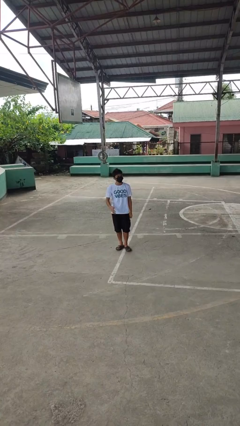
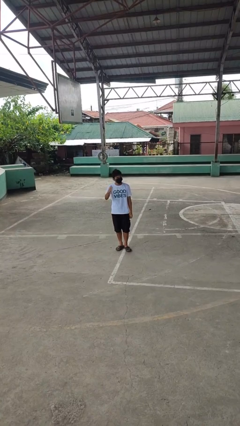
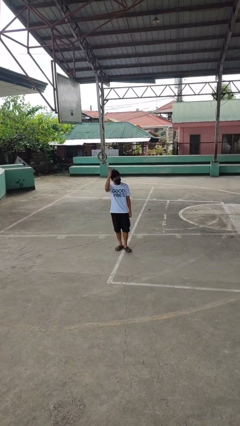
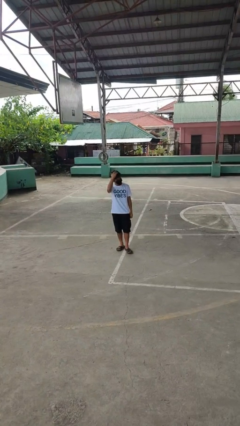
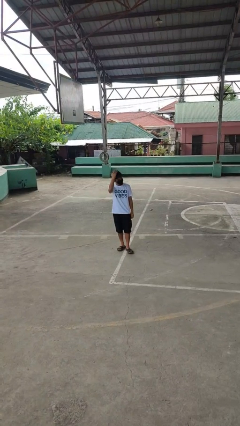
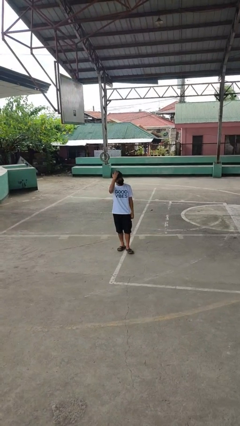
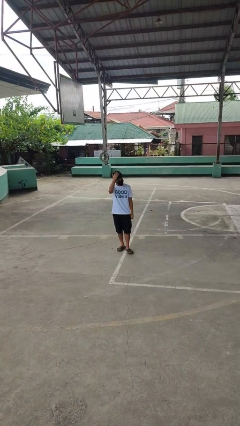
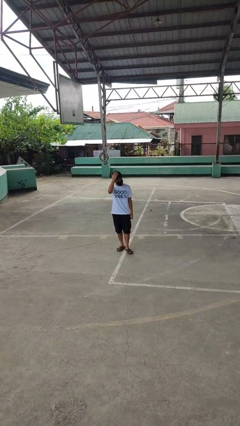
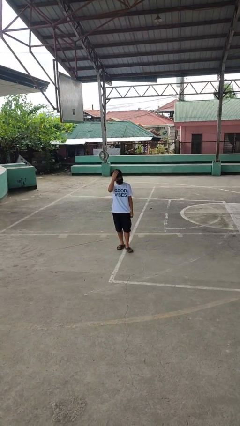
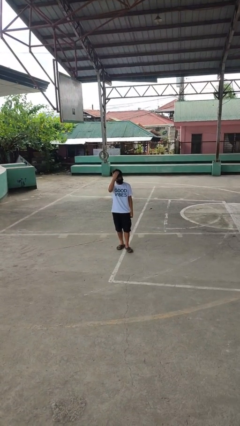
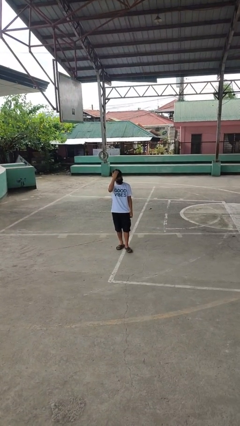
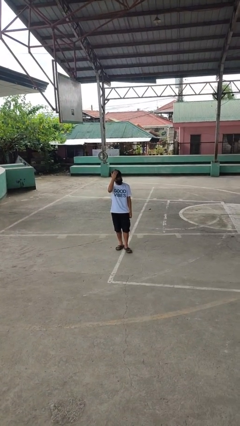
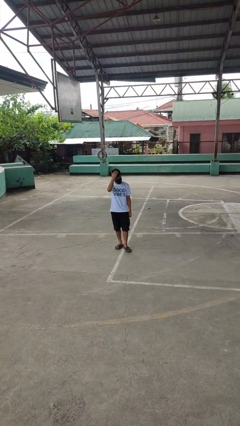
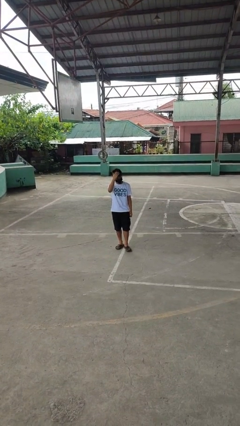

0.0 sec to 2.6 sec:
person pats head

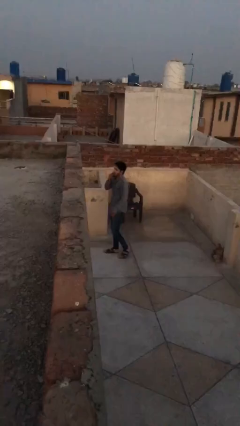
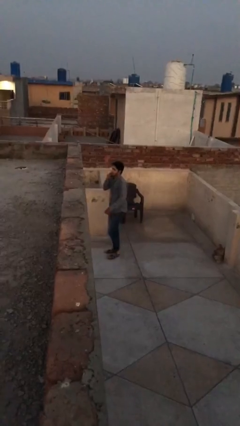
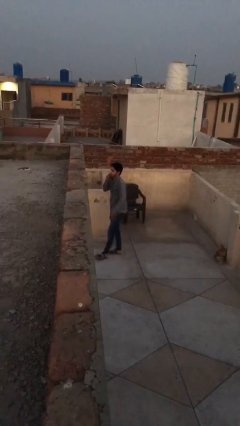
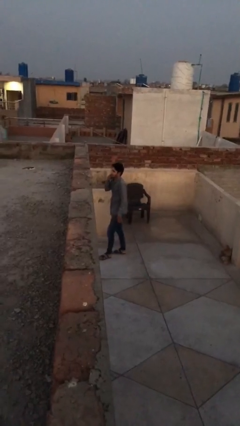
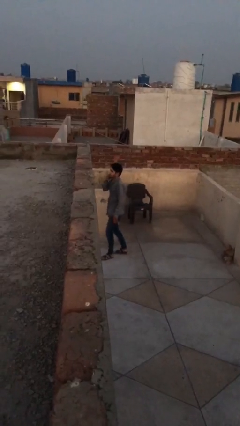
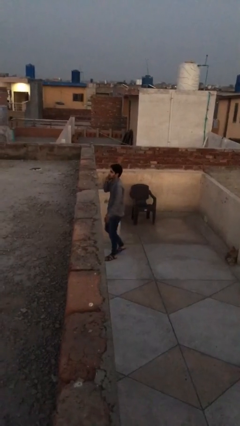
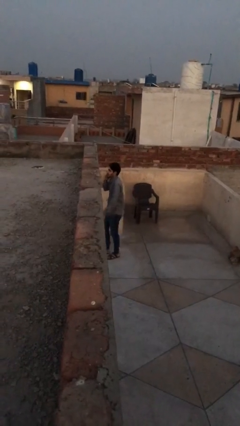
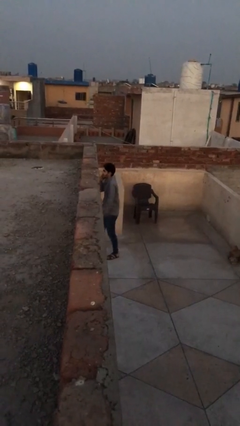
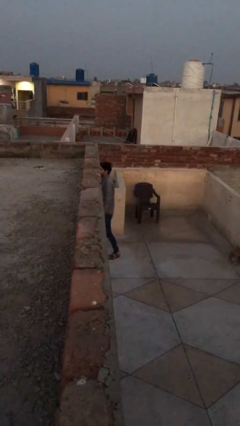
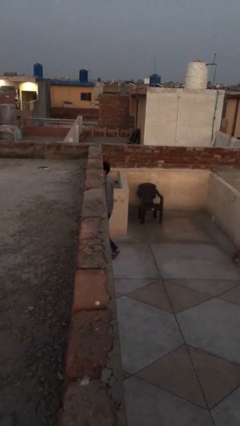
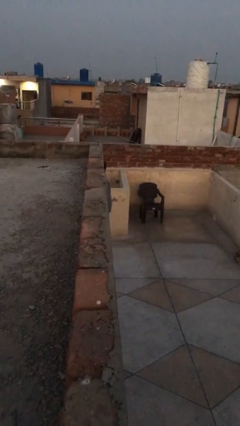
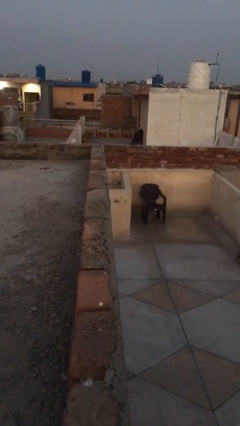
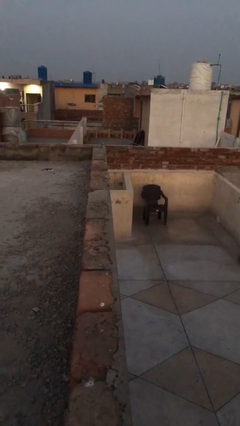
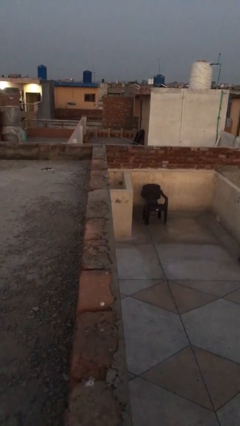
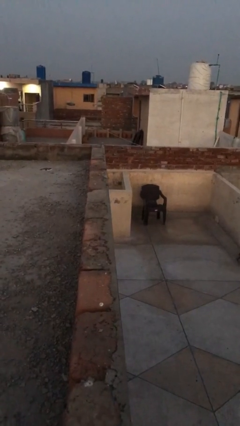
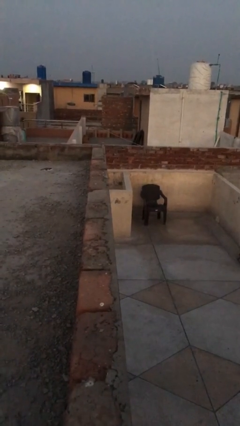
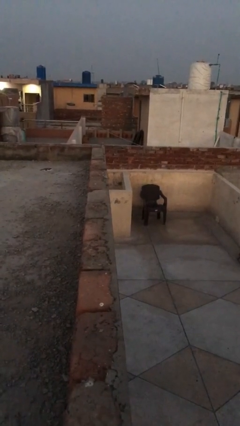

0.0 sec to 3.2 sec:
person exits scene through structure

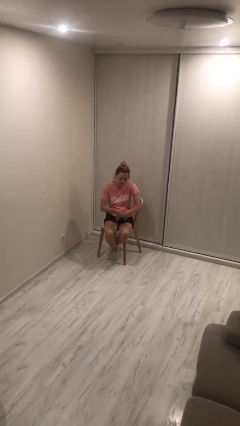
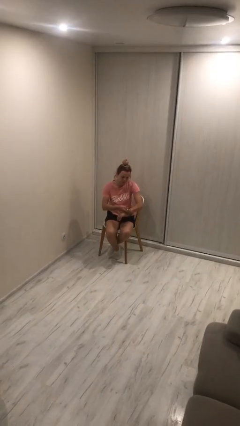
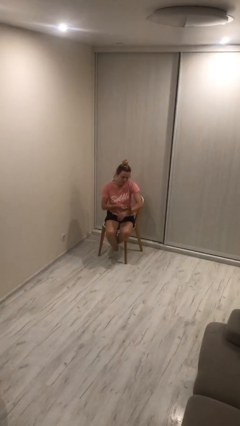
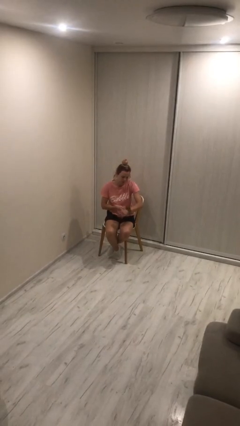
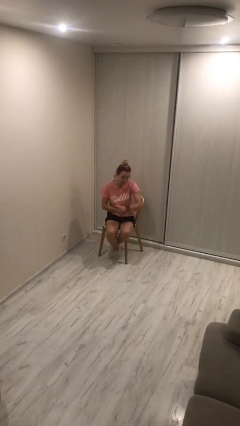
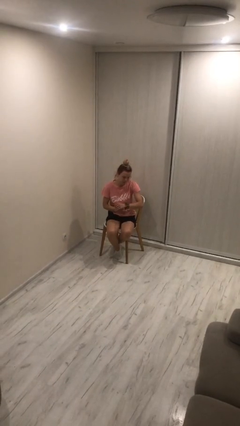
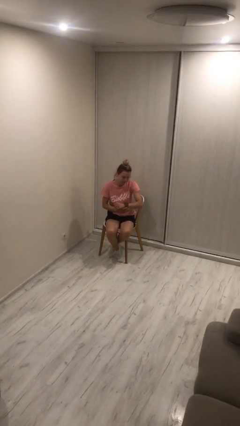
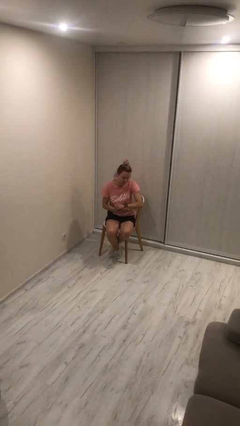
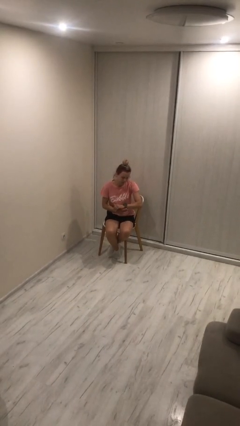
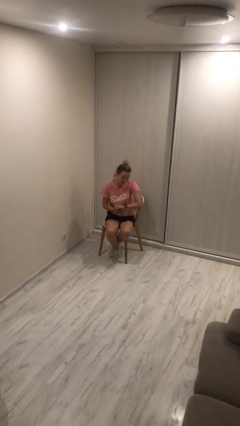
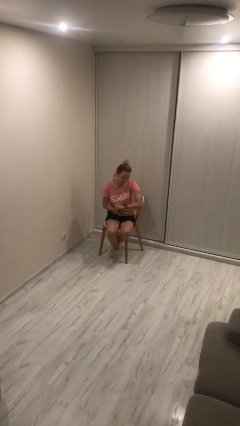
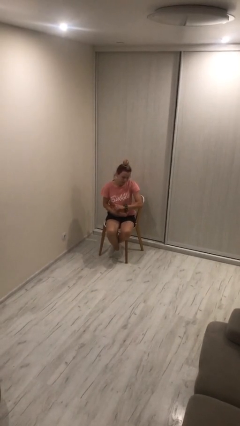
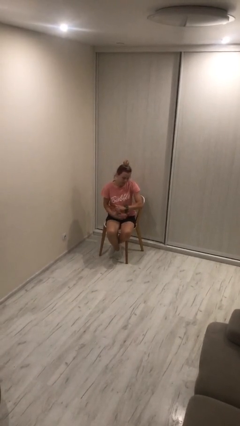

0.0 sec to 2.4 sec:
person puts on wristwatch

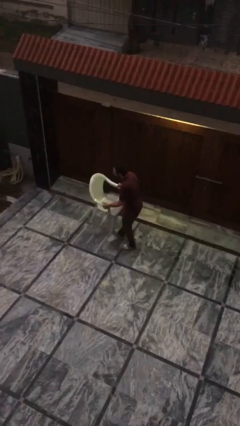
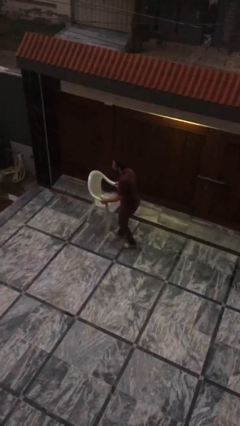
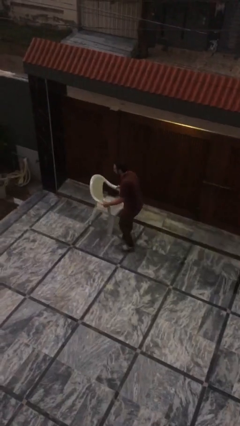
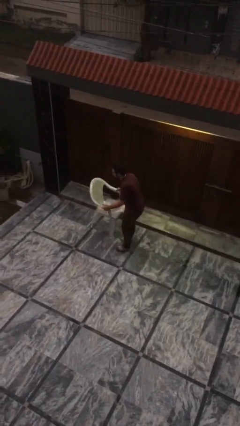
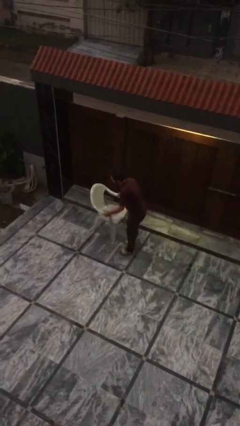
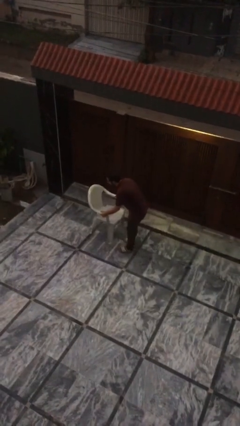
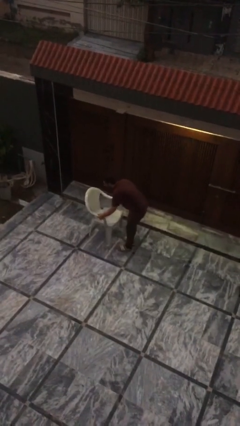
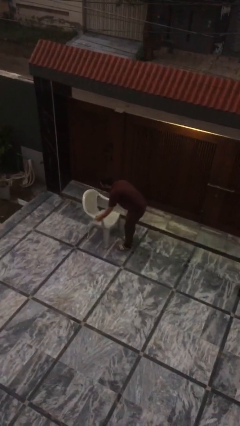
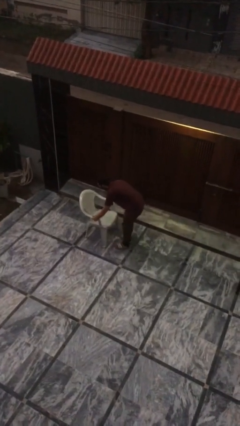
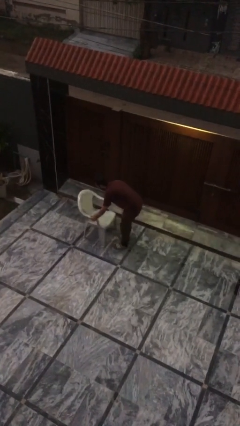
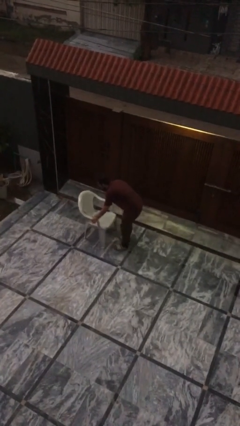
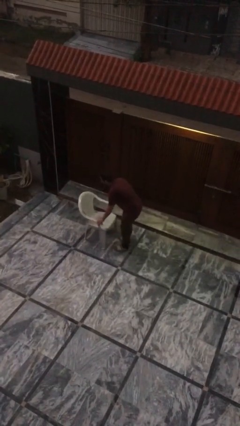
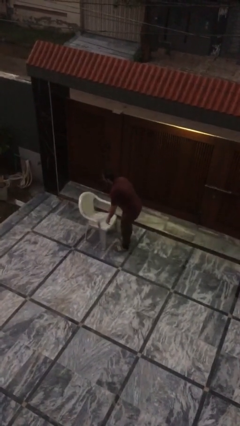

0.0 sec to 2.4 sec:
person puts down object on floor

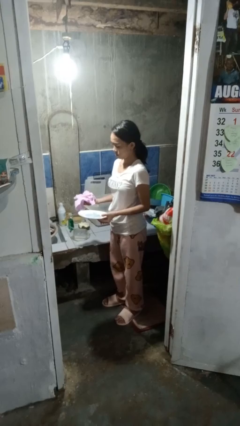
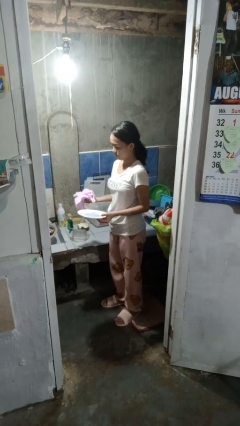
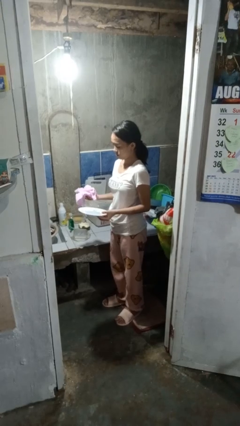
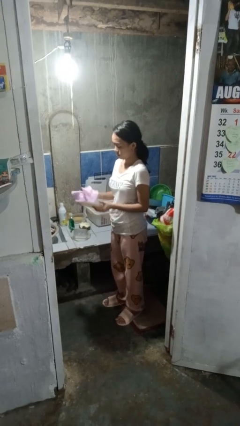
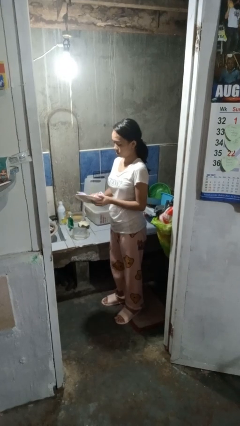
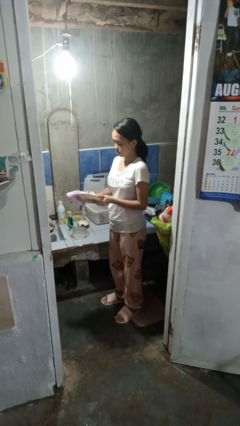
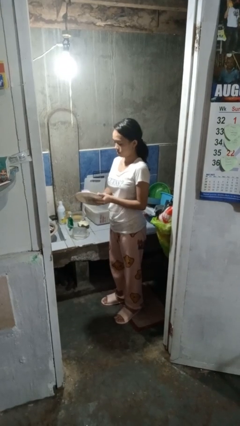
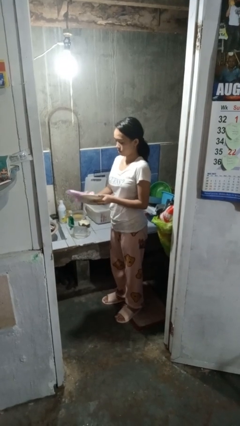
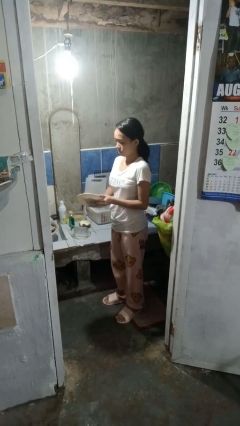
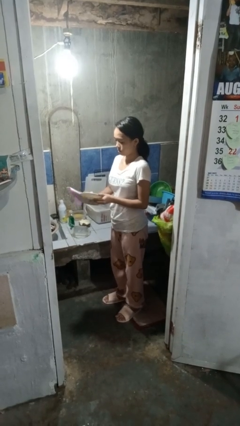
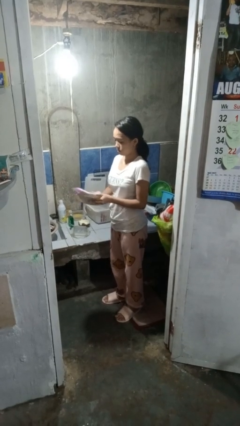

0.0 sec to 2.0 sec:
person dries dish

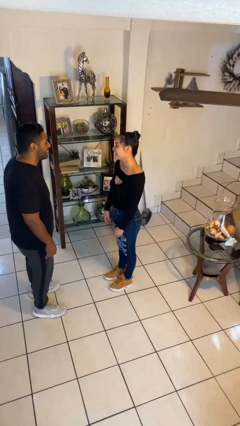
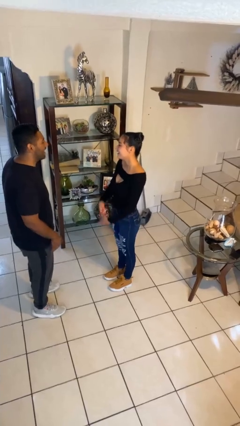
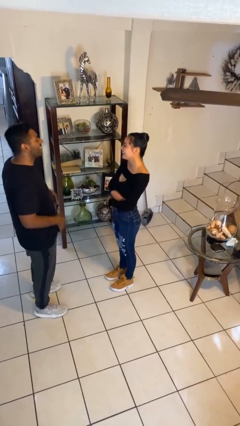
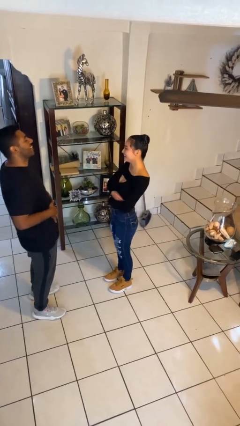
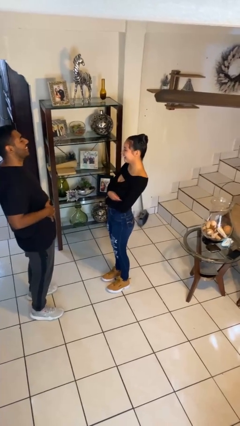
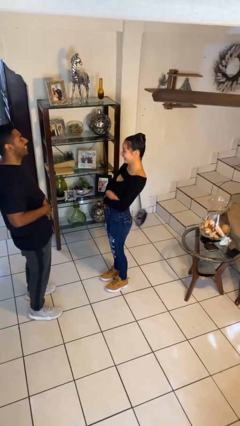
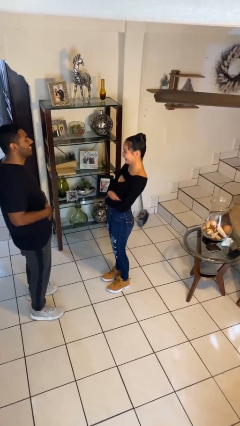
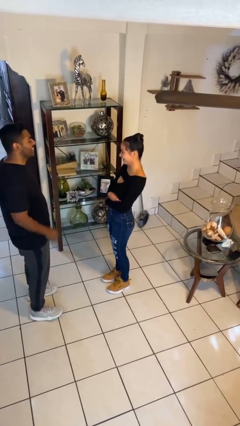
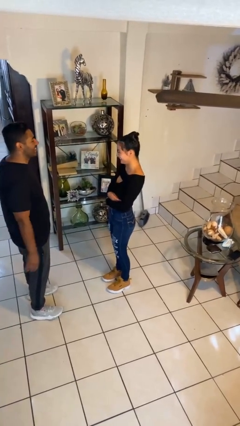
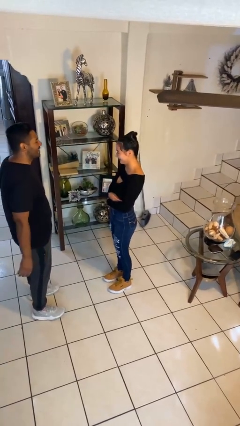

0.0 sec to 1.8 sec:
person laughs with person

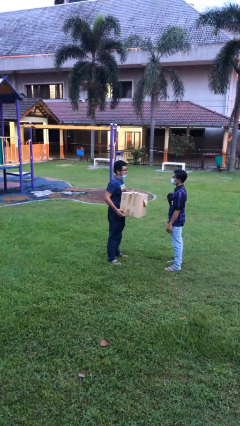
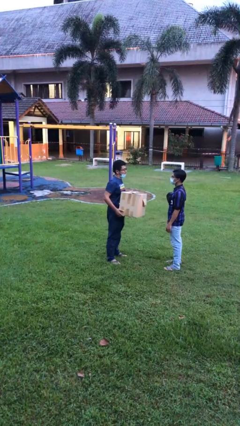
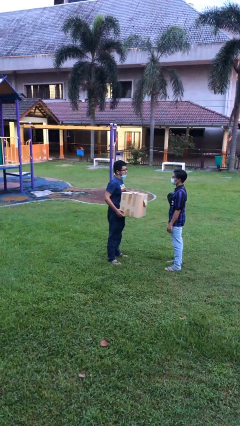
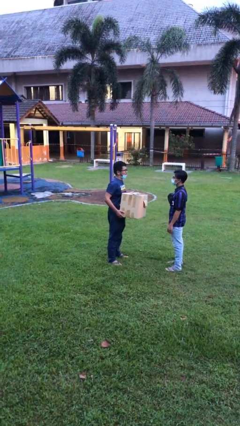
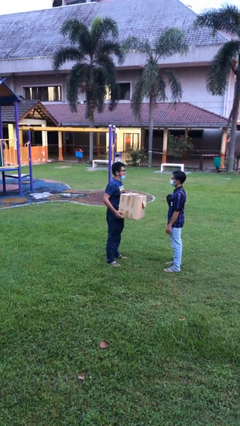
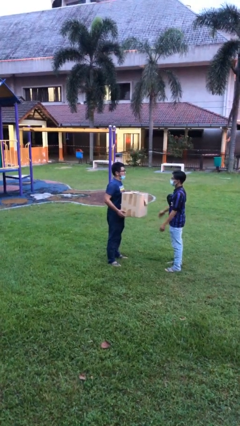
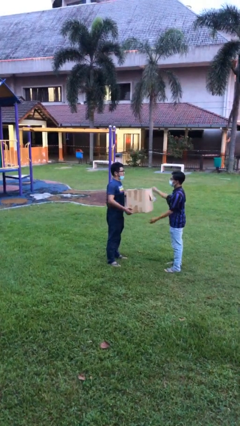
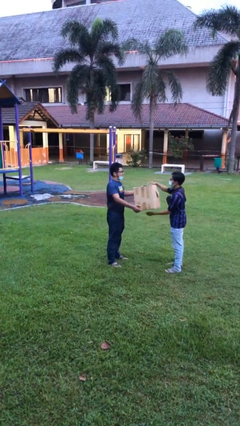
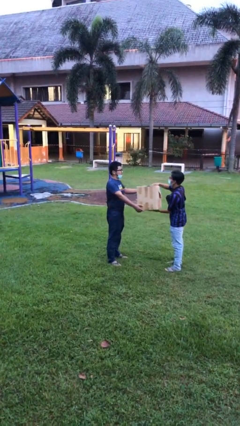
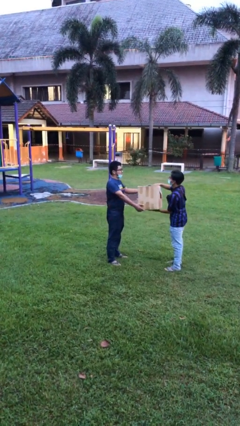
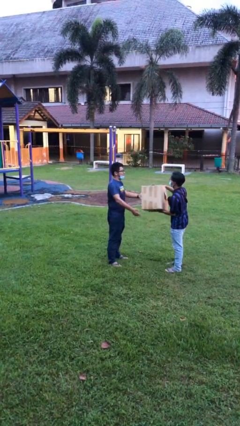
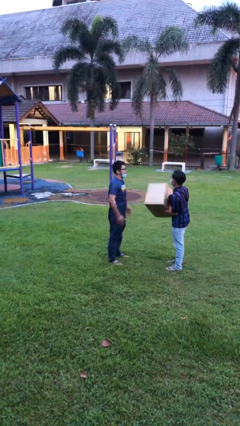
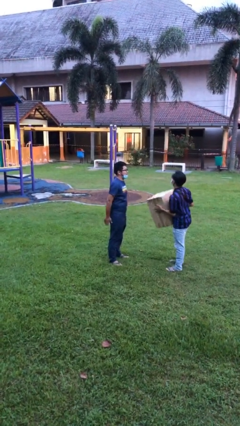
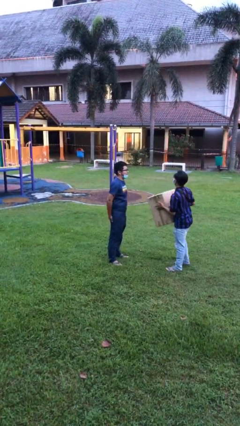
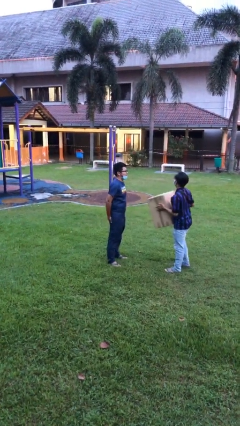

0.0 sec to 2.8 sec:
person transfers object to person
